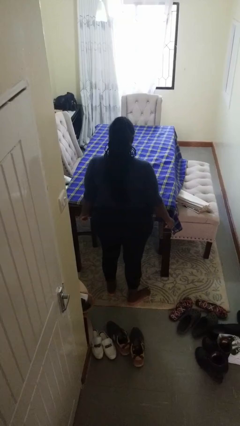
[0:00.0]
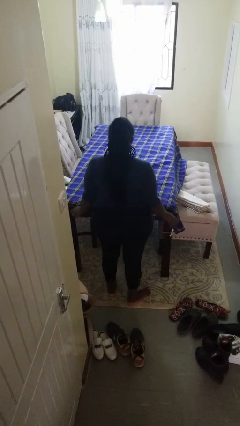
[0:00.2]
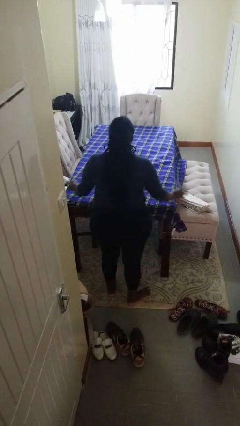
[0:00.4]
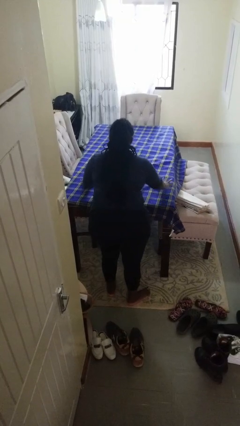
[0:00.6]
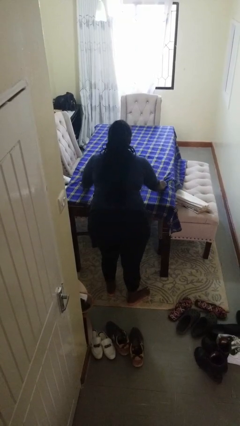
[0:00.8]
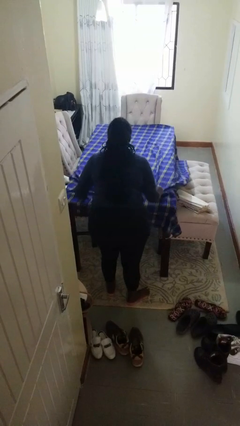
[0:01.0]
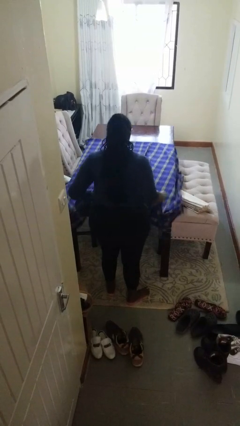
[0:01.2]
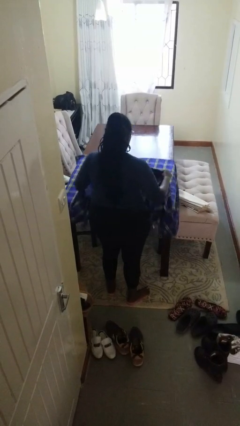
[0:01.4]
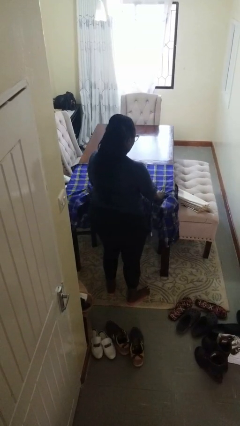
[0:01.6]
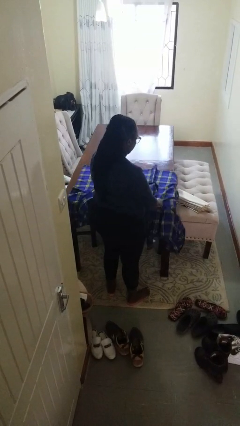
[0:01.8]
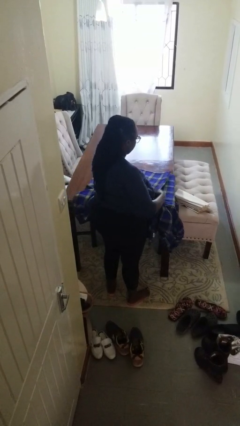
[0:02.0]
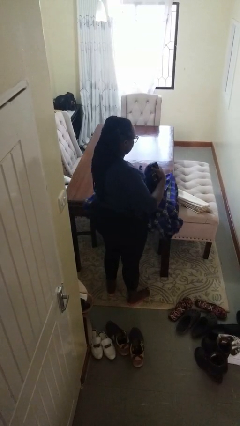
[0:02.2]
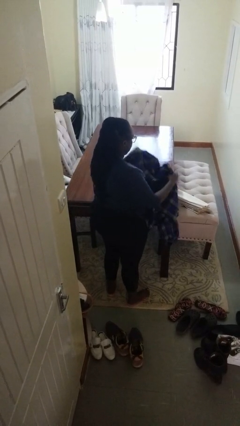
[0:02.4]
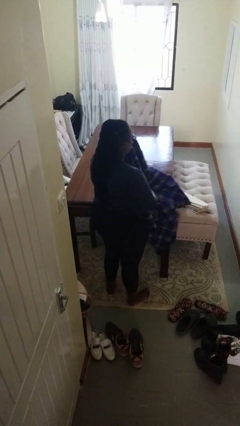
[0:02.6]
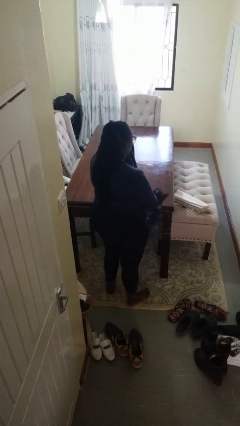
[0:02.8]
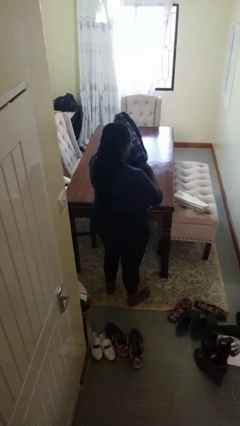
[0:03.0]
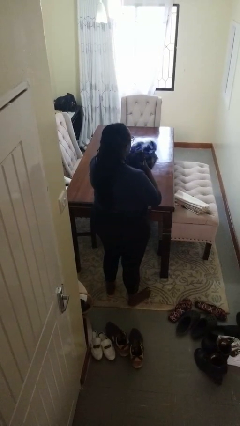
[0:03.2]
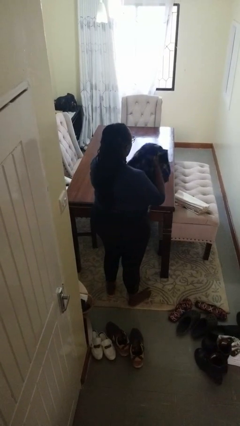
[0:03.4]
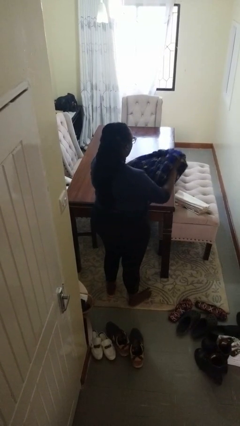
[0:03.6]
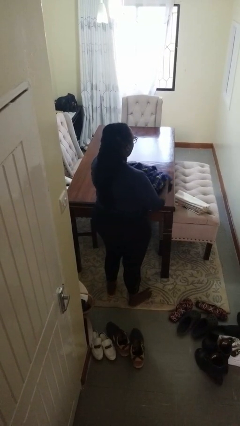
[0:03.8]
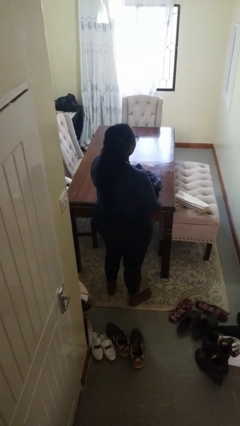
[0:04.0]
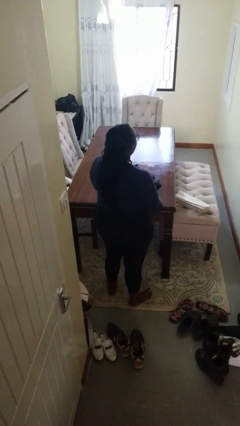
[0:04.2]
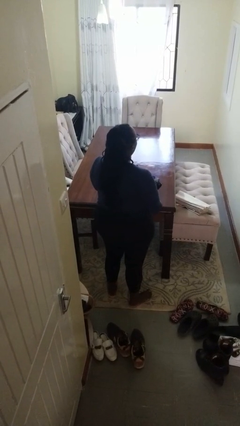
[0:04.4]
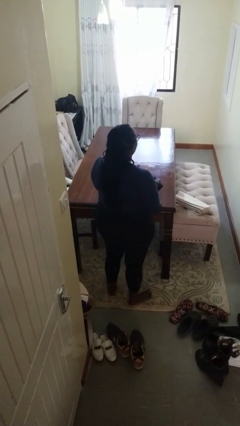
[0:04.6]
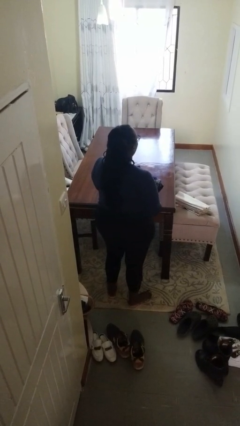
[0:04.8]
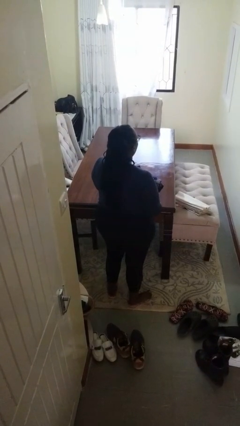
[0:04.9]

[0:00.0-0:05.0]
person folds tablecloth

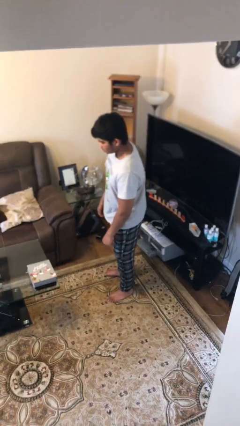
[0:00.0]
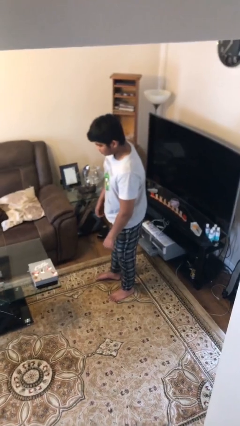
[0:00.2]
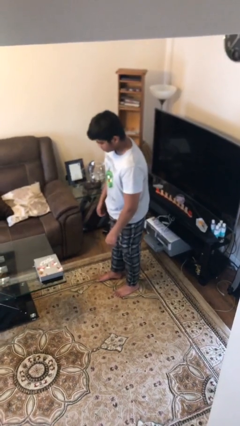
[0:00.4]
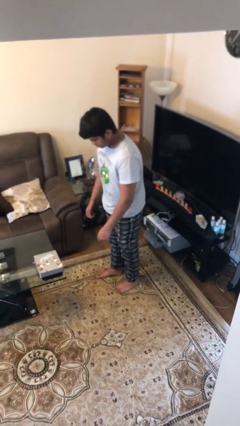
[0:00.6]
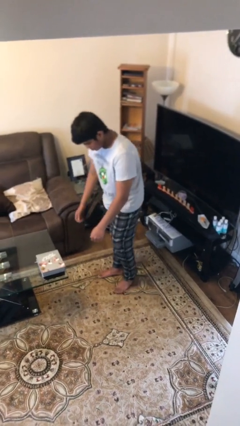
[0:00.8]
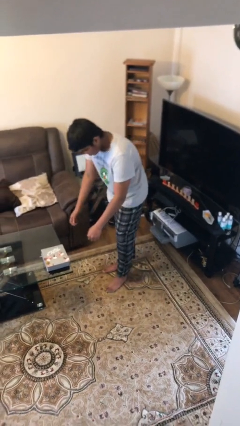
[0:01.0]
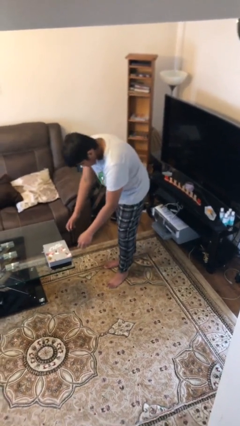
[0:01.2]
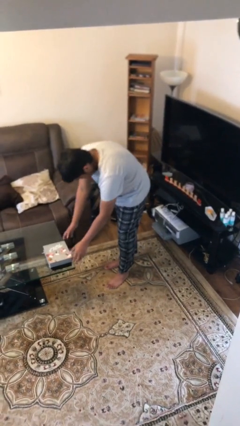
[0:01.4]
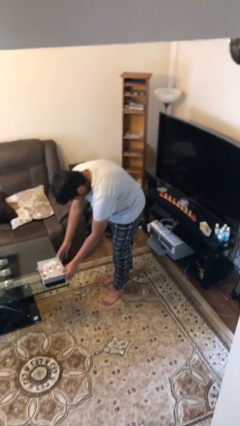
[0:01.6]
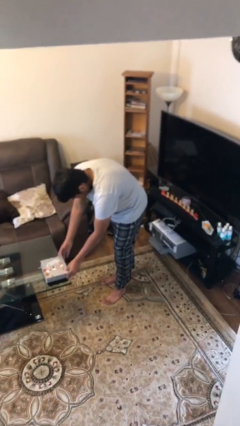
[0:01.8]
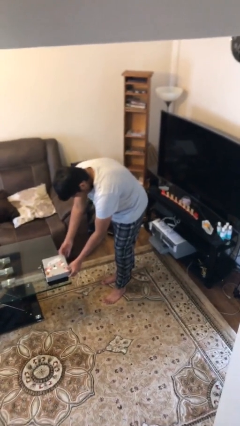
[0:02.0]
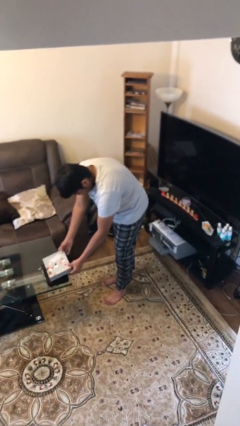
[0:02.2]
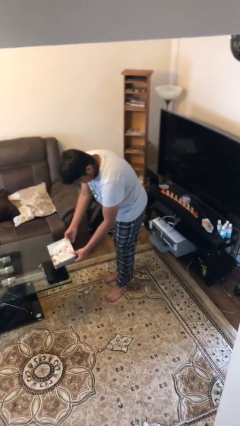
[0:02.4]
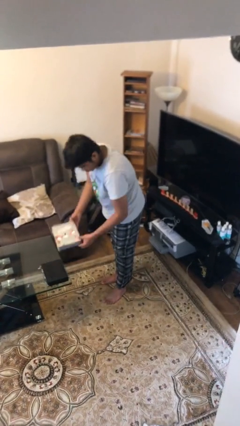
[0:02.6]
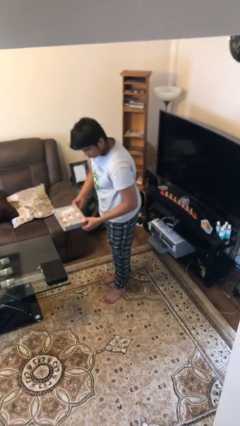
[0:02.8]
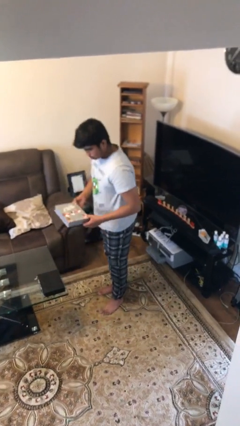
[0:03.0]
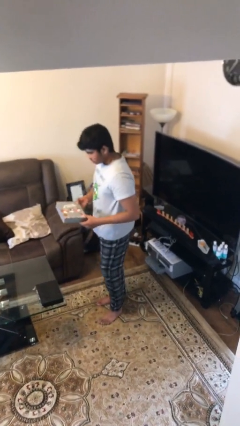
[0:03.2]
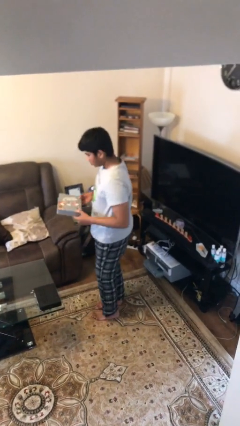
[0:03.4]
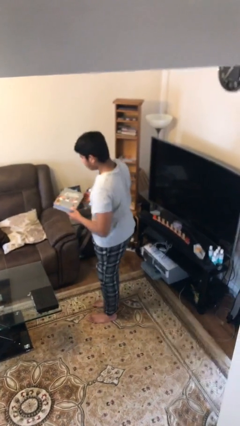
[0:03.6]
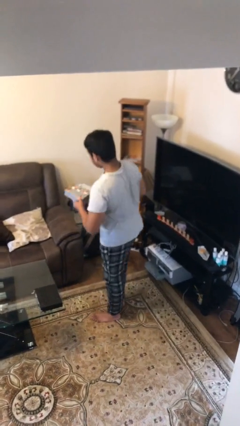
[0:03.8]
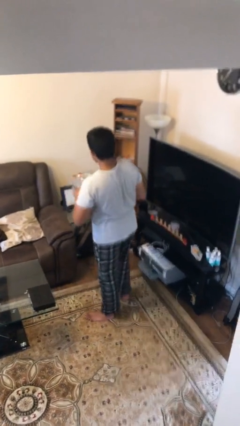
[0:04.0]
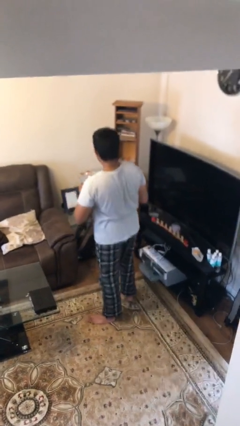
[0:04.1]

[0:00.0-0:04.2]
person picks up object from table

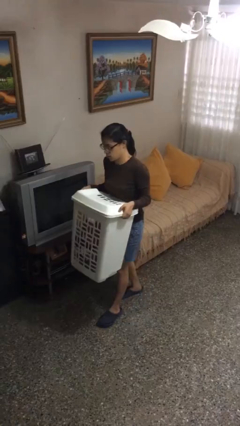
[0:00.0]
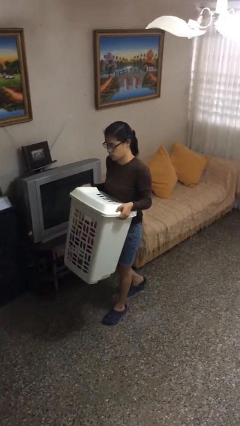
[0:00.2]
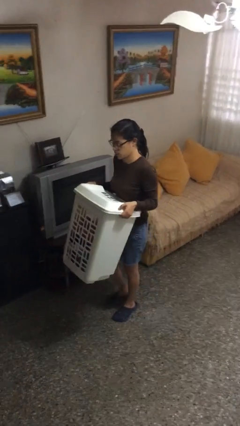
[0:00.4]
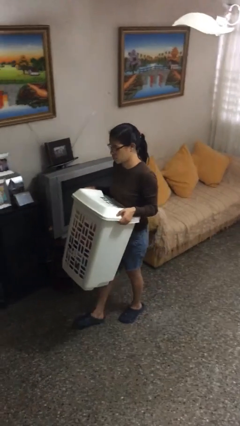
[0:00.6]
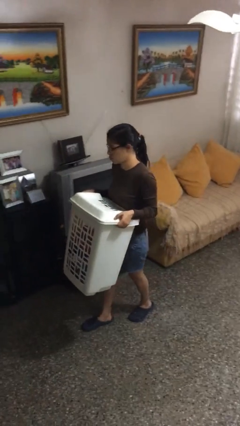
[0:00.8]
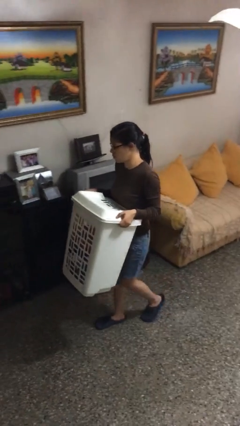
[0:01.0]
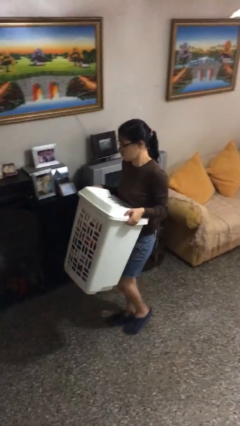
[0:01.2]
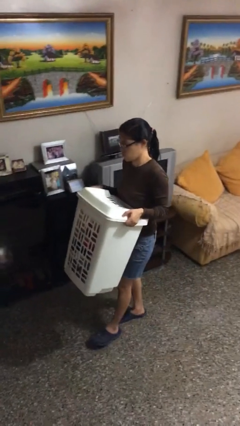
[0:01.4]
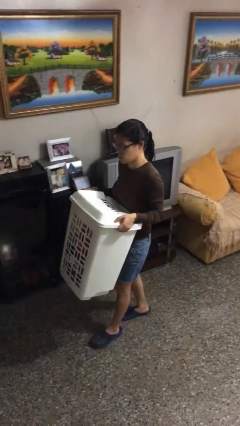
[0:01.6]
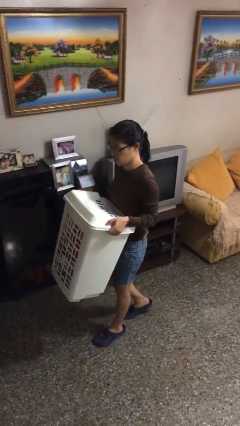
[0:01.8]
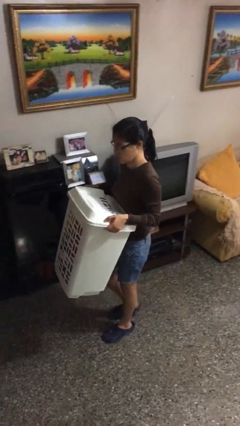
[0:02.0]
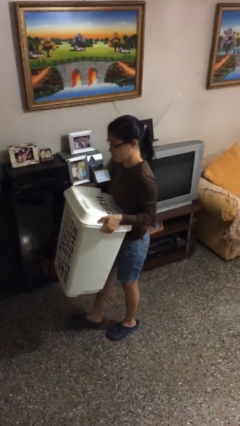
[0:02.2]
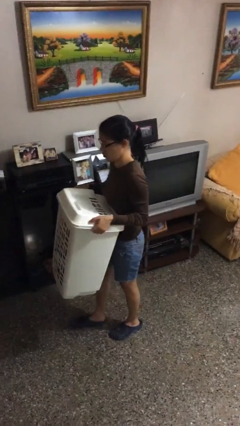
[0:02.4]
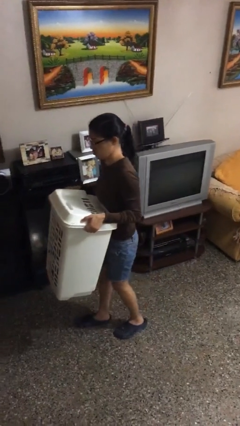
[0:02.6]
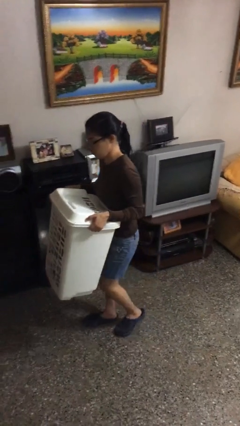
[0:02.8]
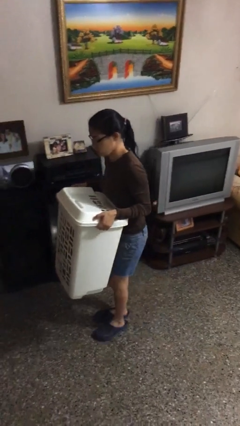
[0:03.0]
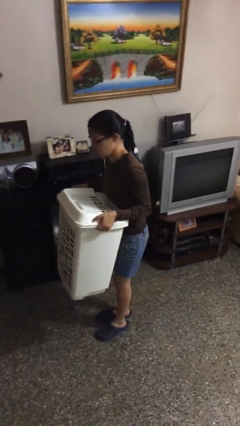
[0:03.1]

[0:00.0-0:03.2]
person carries heavy object

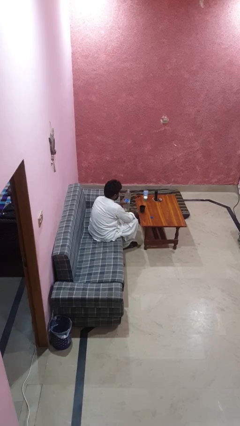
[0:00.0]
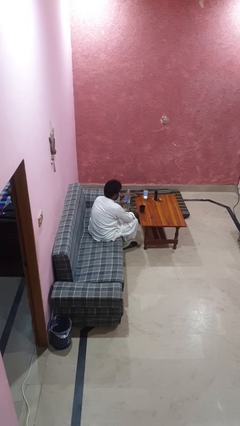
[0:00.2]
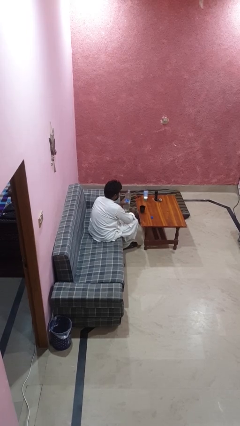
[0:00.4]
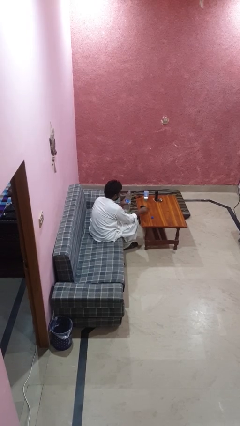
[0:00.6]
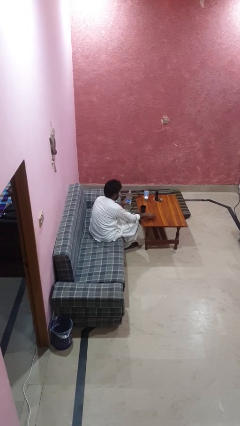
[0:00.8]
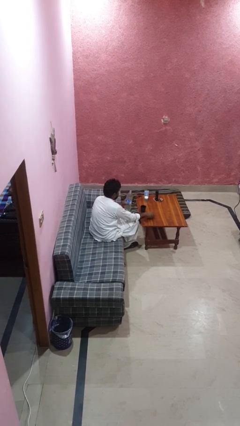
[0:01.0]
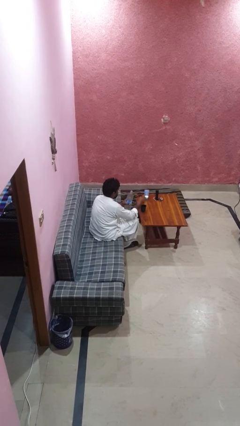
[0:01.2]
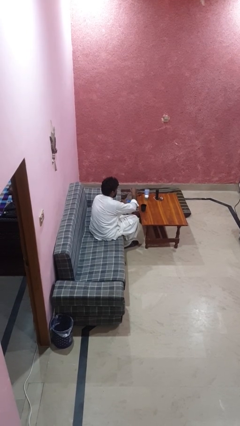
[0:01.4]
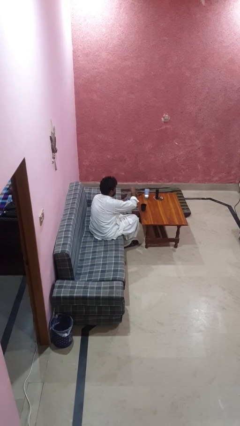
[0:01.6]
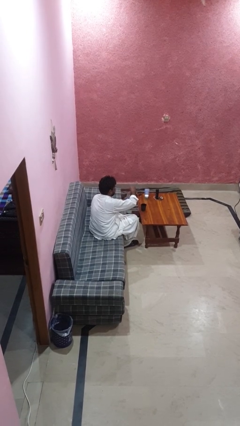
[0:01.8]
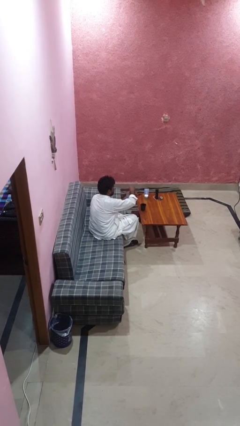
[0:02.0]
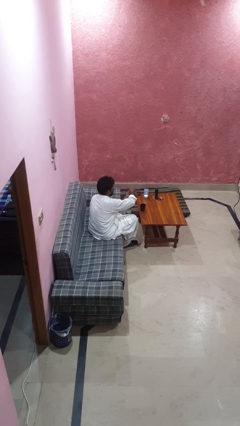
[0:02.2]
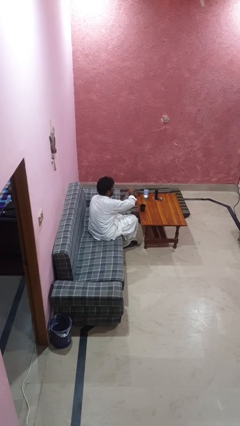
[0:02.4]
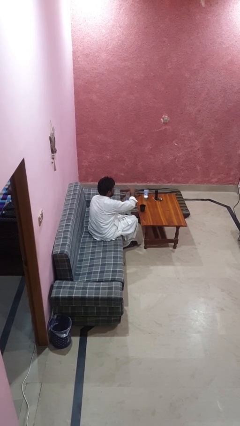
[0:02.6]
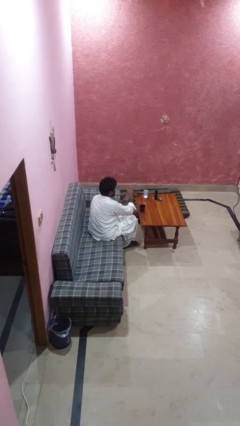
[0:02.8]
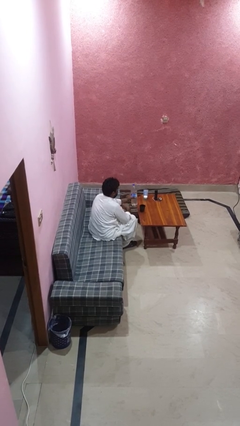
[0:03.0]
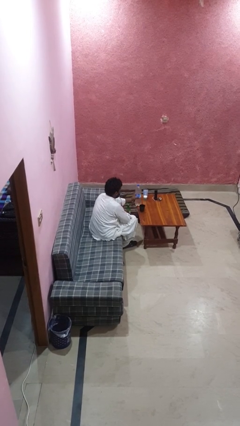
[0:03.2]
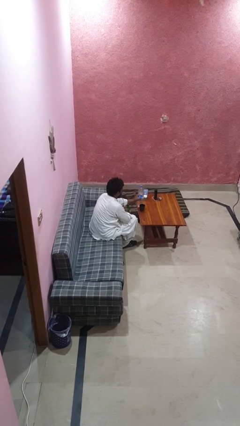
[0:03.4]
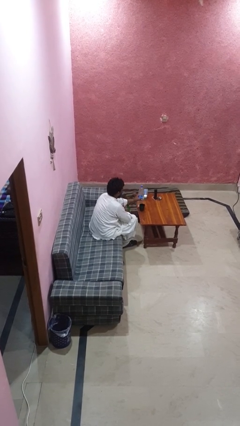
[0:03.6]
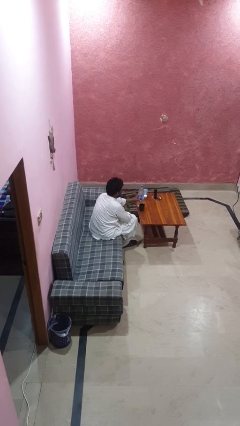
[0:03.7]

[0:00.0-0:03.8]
person screws lid to bottle

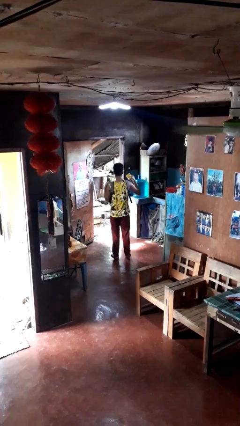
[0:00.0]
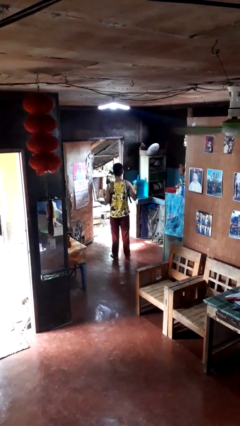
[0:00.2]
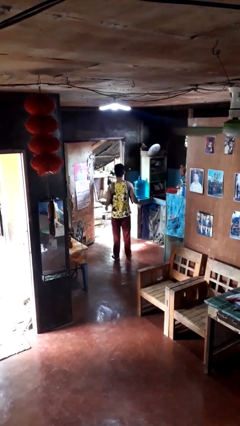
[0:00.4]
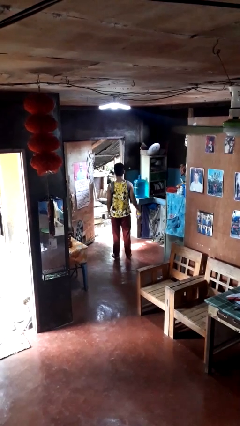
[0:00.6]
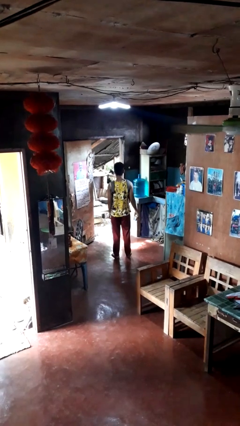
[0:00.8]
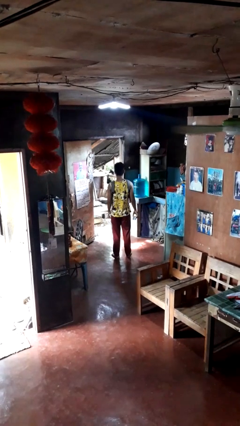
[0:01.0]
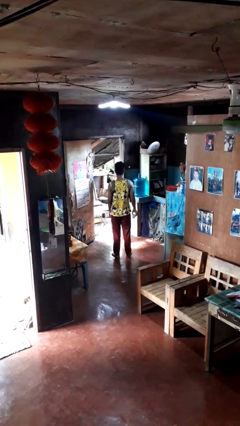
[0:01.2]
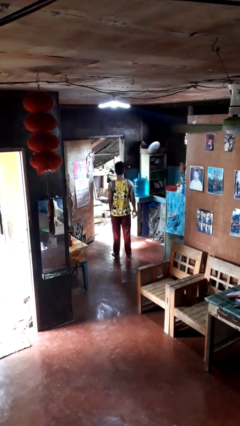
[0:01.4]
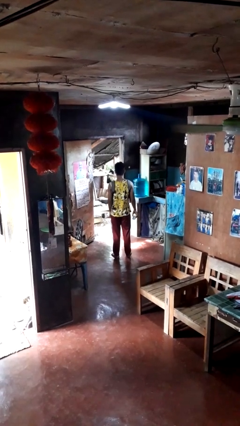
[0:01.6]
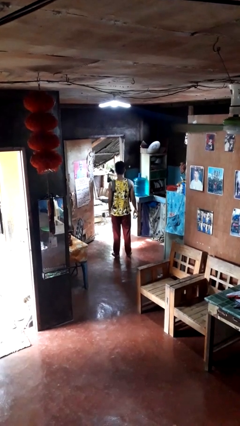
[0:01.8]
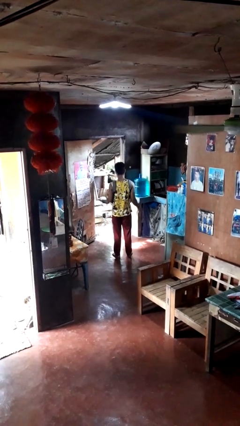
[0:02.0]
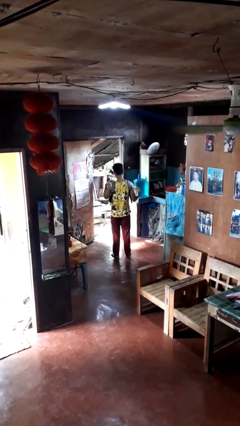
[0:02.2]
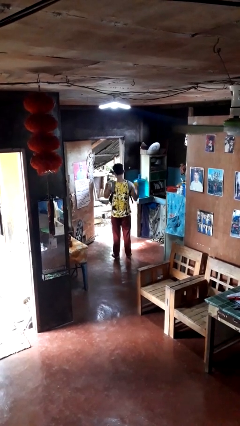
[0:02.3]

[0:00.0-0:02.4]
person takes object from backpack
